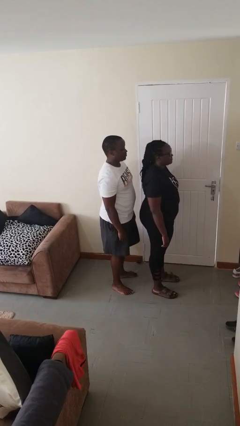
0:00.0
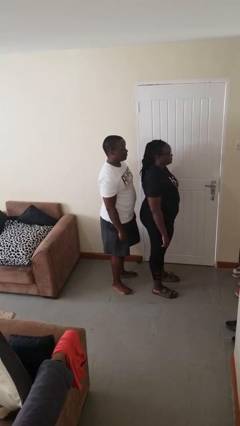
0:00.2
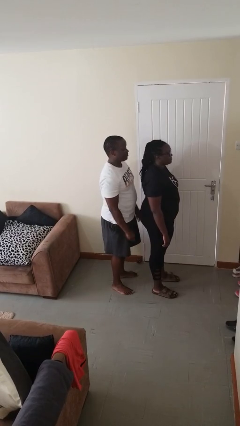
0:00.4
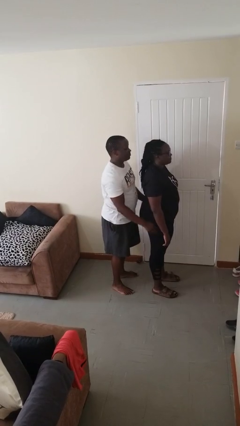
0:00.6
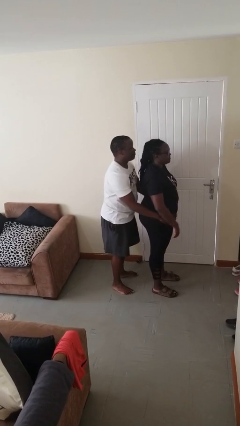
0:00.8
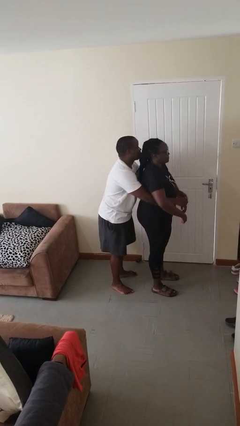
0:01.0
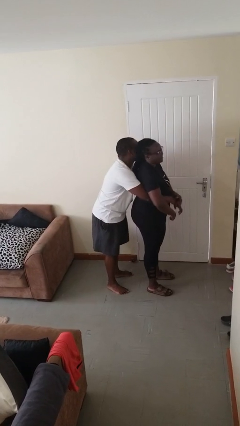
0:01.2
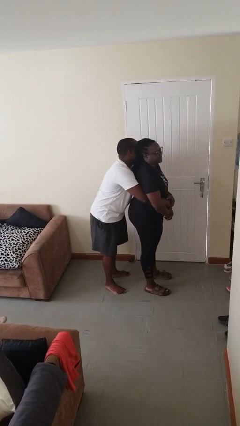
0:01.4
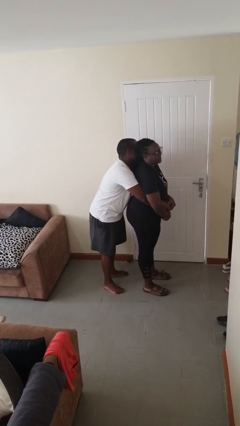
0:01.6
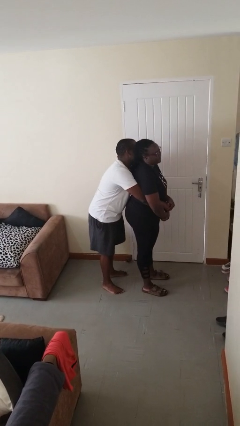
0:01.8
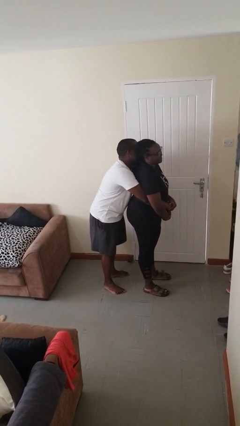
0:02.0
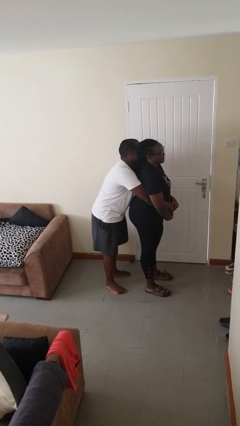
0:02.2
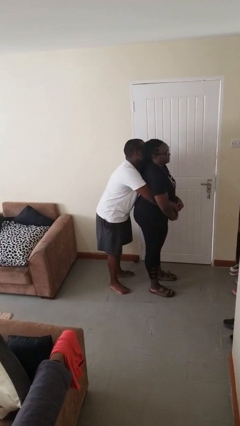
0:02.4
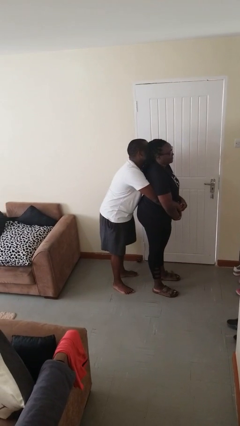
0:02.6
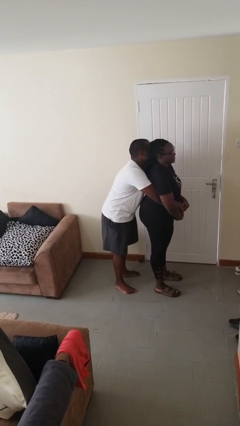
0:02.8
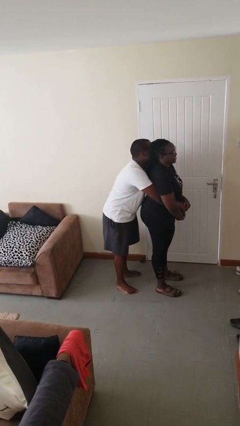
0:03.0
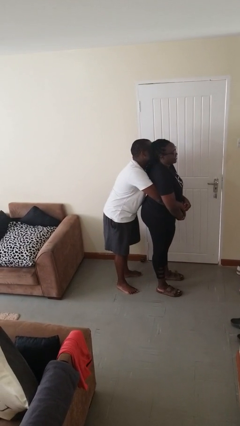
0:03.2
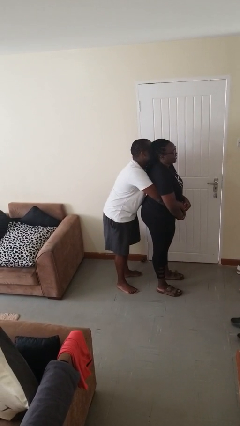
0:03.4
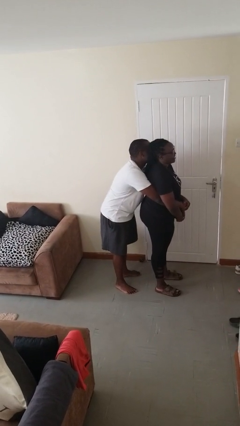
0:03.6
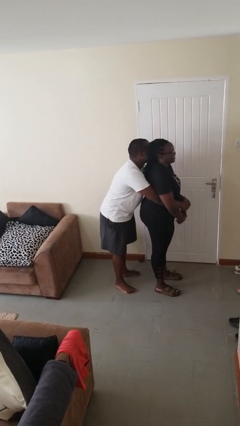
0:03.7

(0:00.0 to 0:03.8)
person hugs person from behind

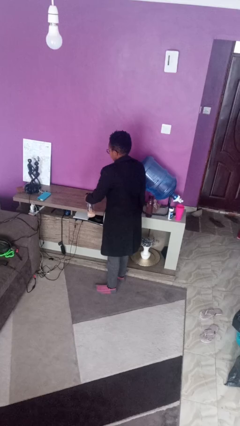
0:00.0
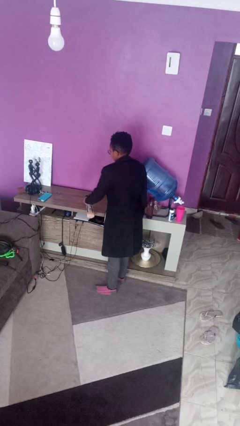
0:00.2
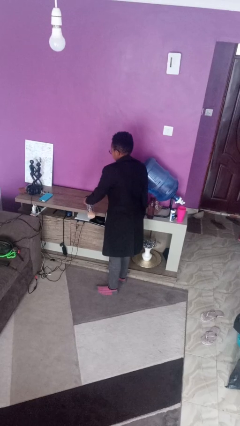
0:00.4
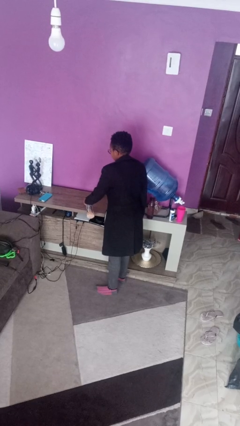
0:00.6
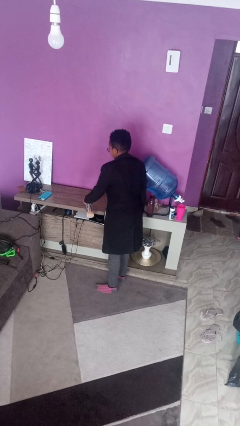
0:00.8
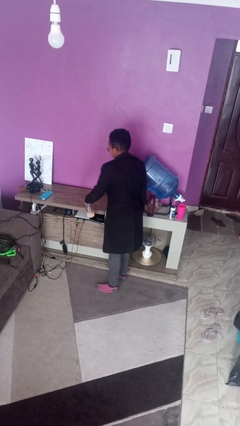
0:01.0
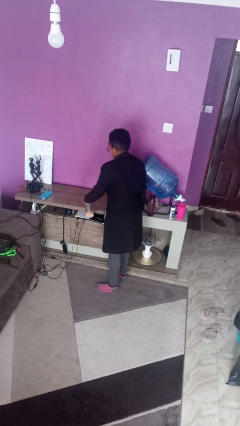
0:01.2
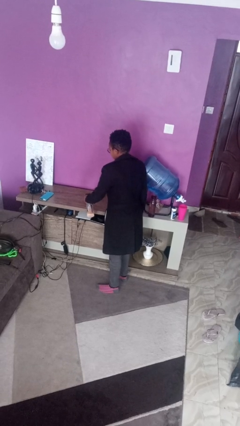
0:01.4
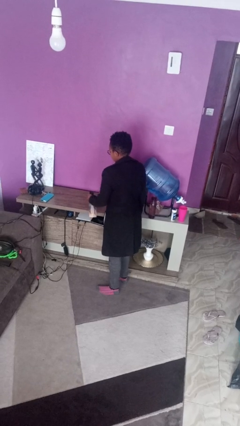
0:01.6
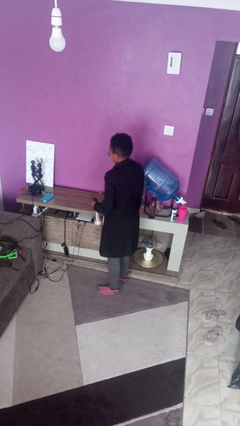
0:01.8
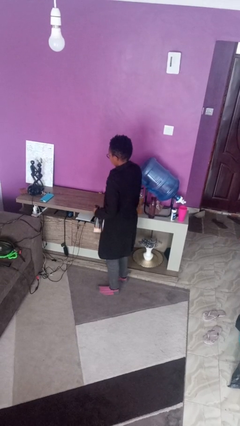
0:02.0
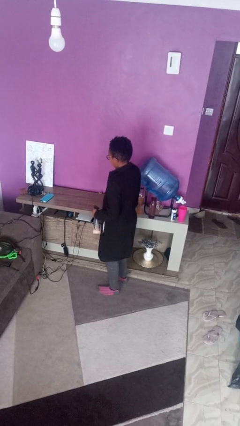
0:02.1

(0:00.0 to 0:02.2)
person sprays from bottle

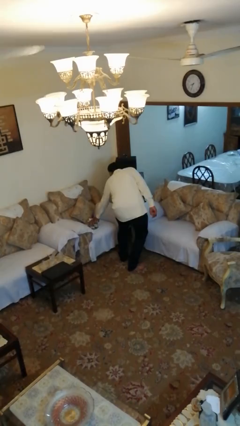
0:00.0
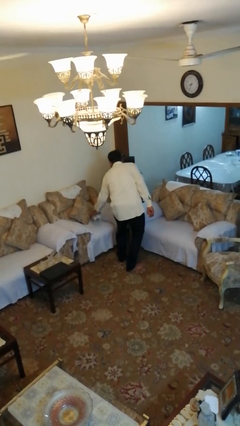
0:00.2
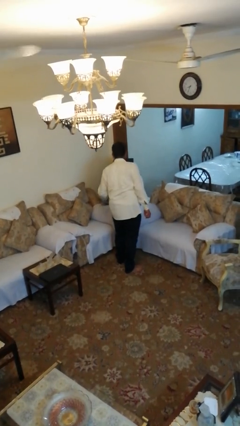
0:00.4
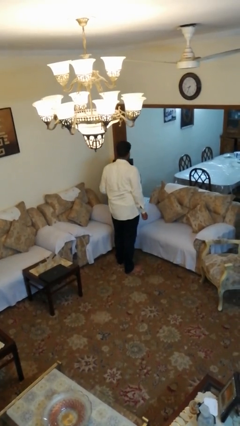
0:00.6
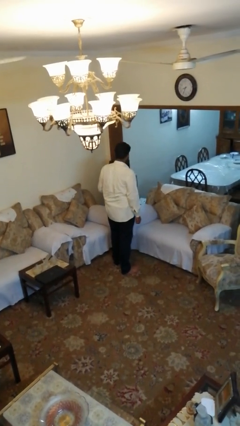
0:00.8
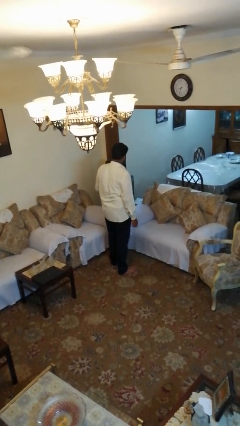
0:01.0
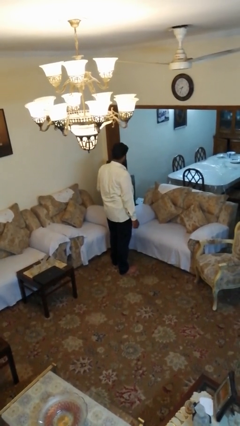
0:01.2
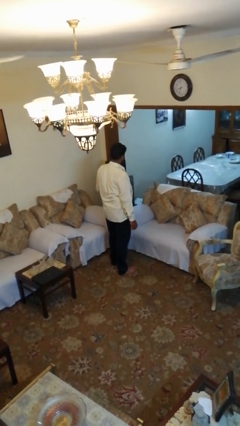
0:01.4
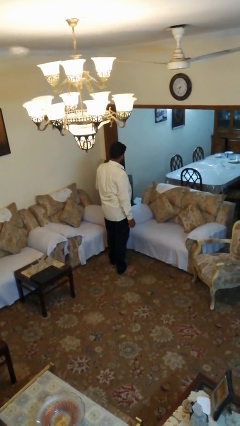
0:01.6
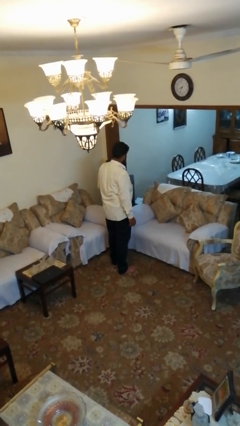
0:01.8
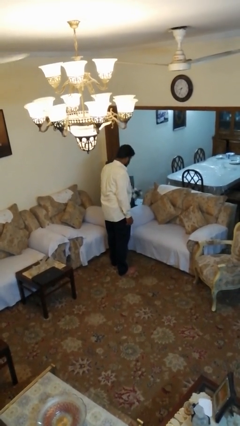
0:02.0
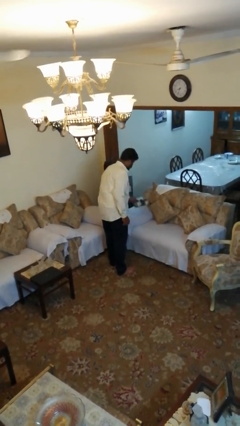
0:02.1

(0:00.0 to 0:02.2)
person picks up object from couch

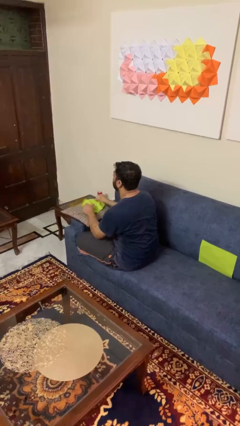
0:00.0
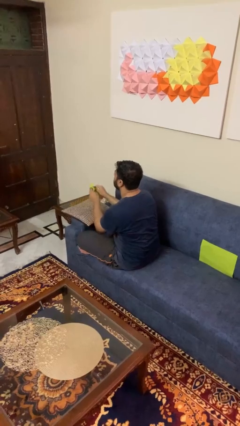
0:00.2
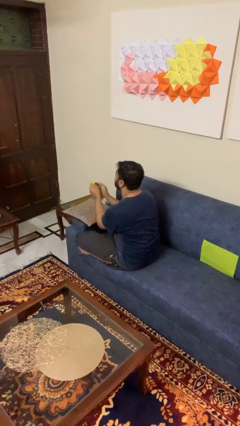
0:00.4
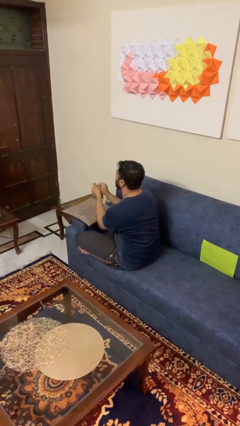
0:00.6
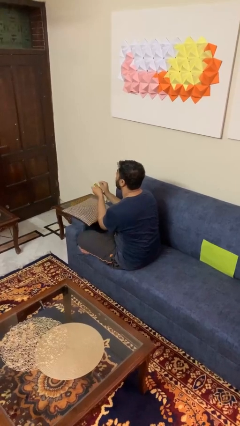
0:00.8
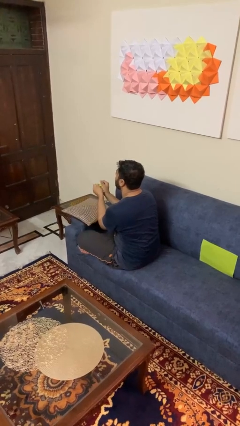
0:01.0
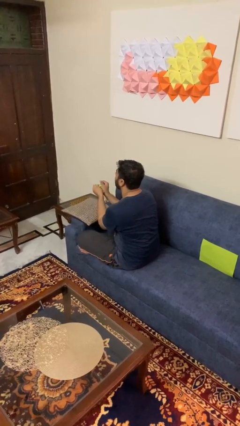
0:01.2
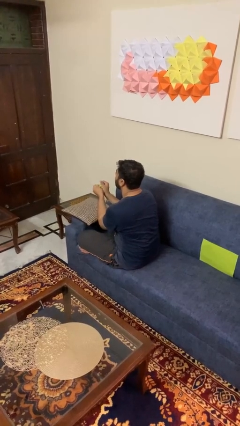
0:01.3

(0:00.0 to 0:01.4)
person crumples paper

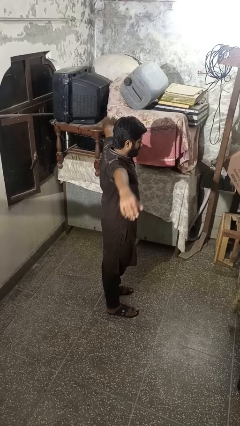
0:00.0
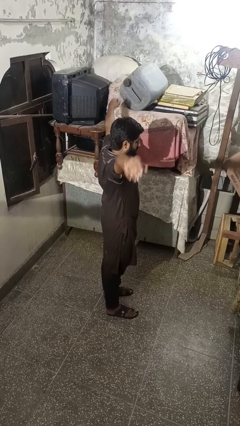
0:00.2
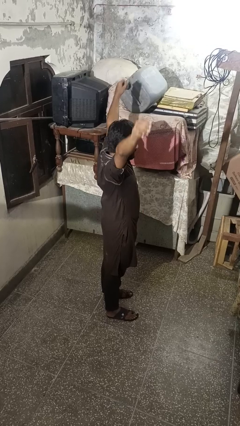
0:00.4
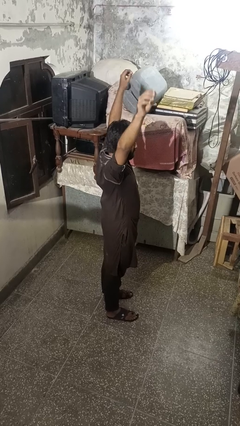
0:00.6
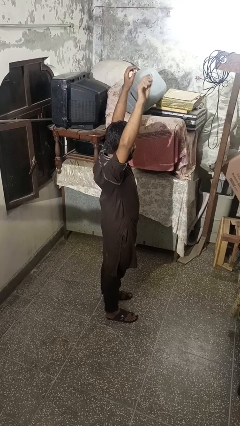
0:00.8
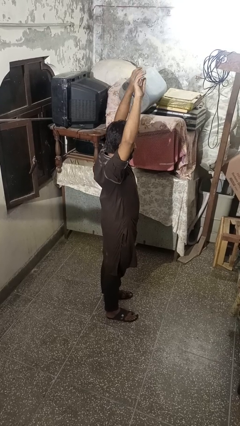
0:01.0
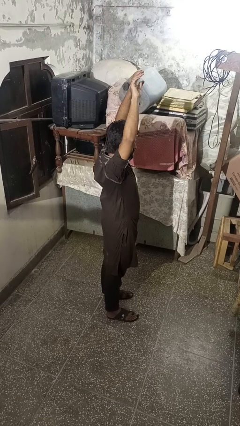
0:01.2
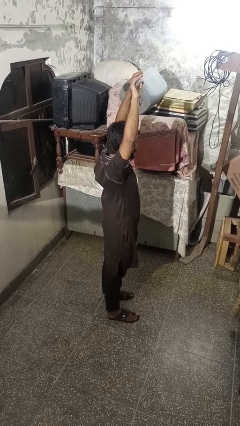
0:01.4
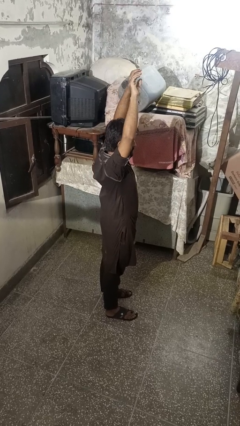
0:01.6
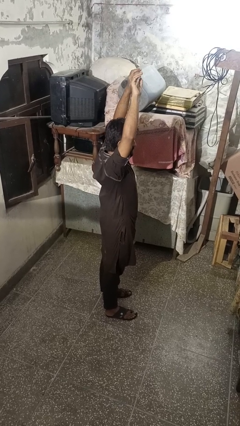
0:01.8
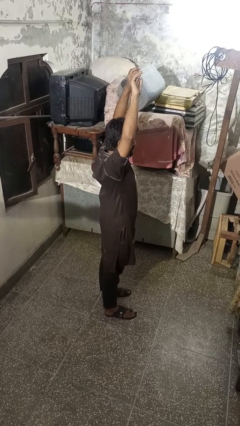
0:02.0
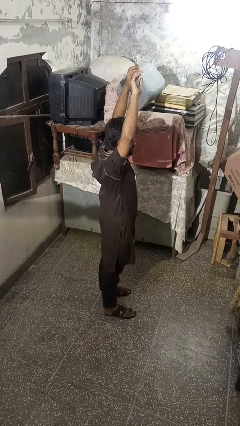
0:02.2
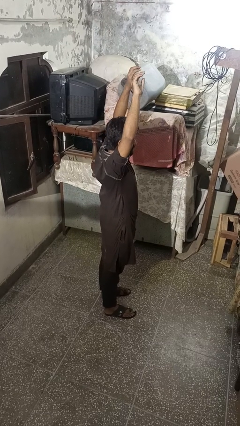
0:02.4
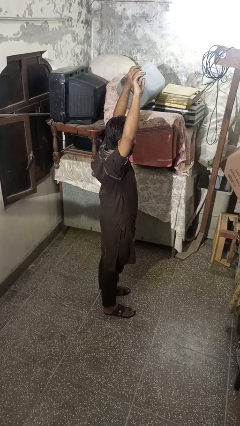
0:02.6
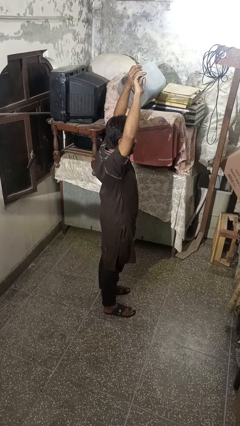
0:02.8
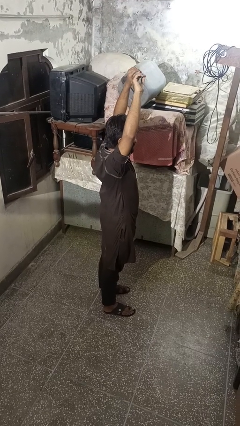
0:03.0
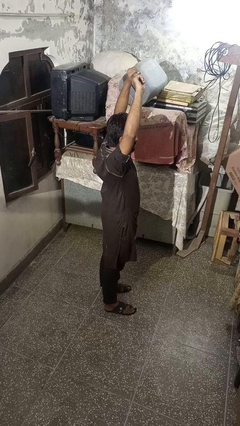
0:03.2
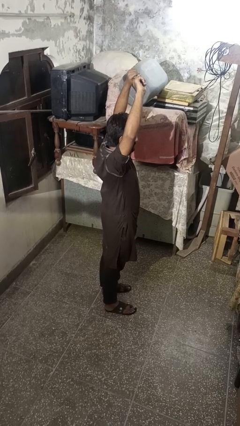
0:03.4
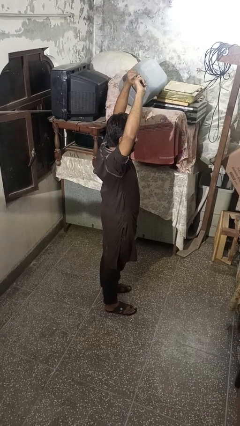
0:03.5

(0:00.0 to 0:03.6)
person stretches arms over head

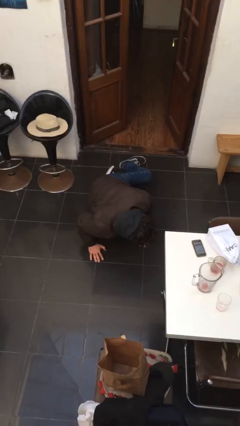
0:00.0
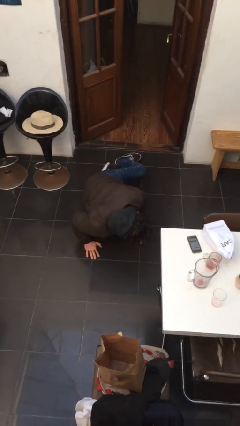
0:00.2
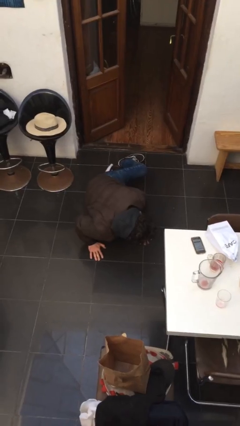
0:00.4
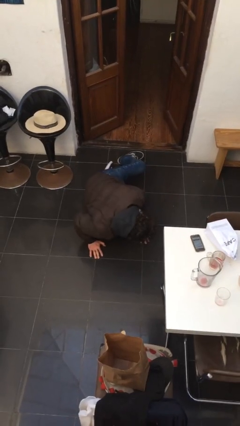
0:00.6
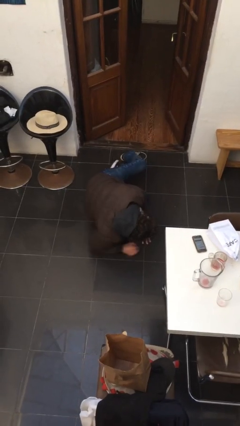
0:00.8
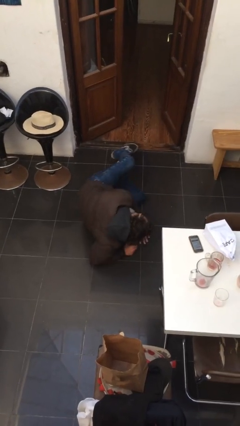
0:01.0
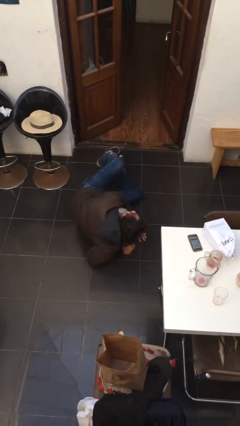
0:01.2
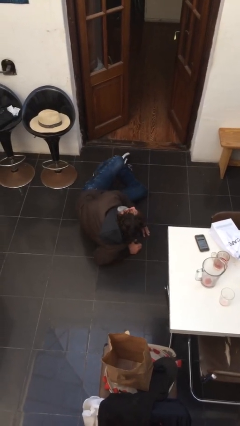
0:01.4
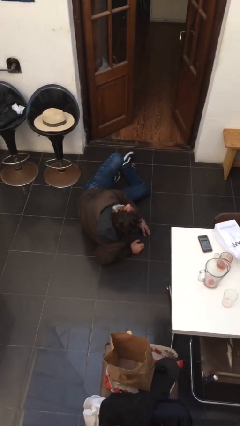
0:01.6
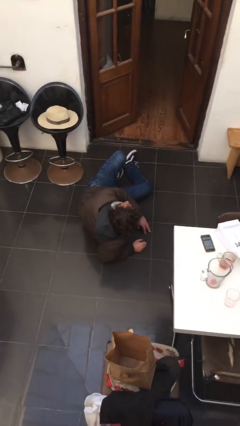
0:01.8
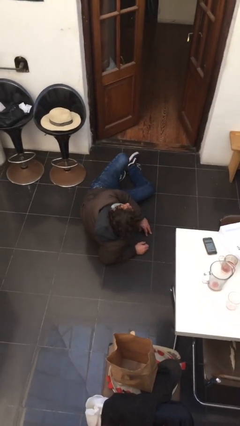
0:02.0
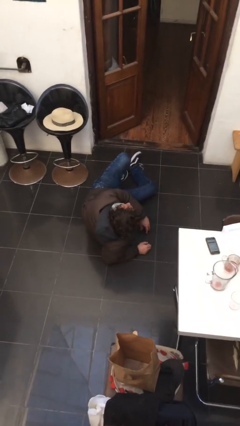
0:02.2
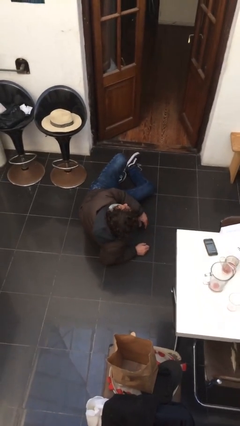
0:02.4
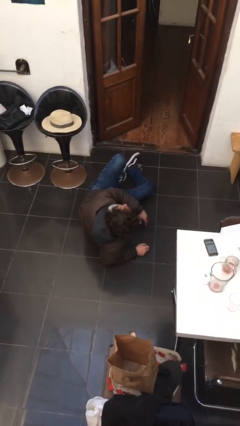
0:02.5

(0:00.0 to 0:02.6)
person lies down on floor

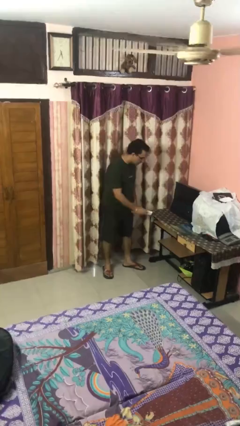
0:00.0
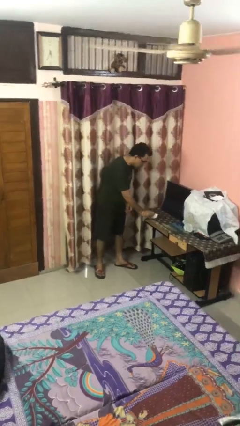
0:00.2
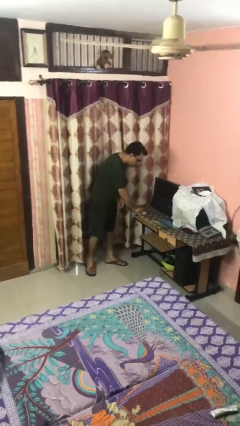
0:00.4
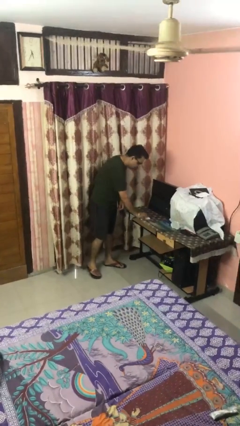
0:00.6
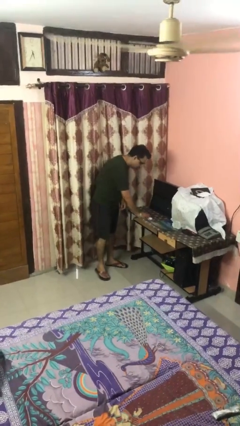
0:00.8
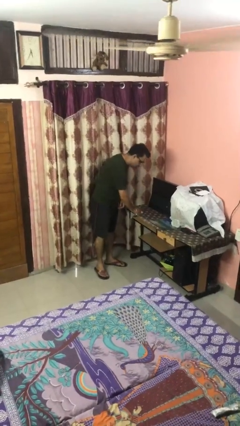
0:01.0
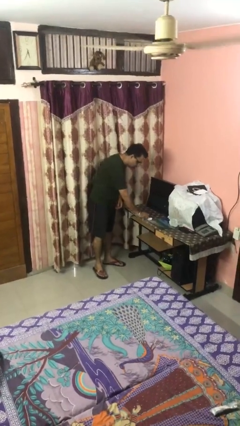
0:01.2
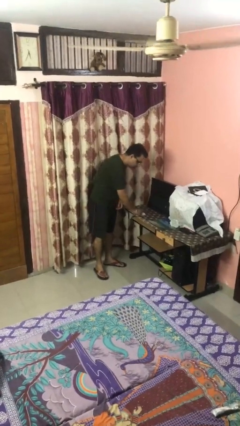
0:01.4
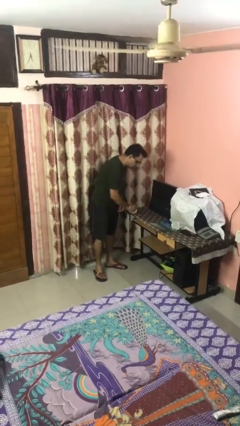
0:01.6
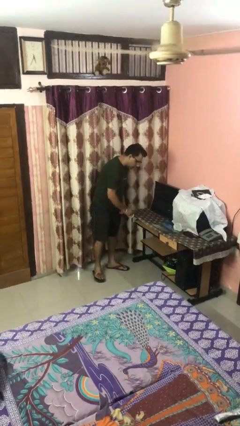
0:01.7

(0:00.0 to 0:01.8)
person cleans table with rag
